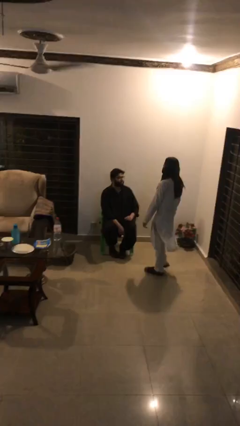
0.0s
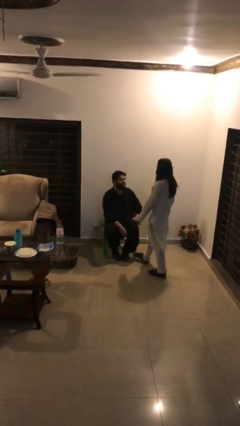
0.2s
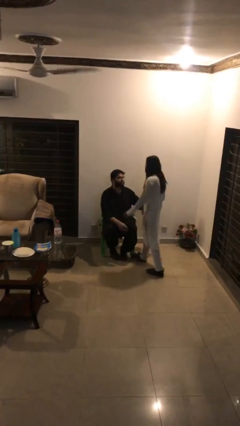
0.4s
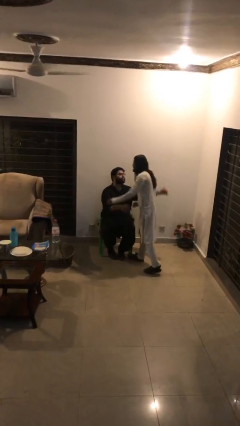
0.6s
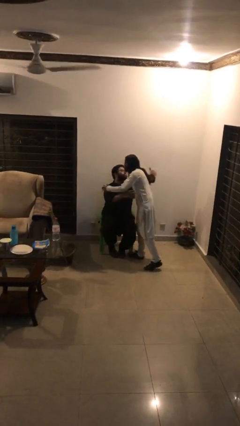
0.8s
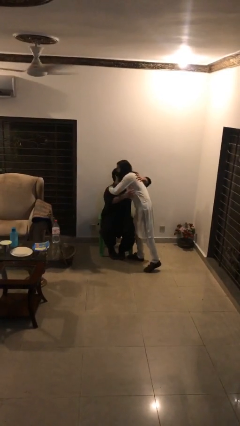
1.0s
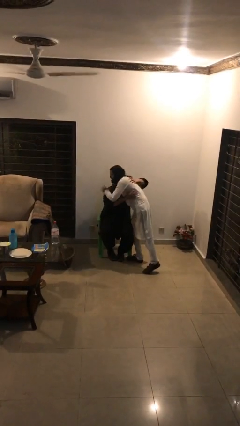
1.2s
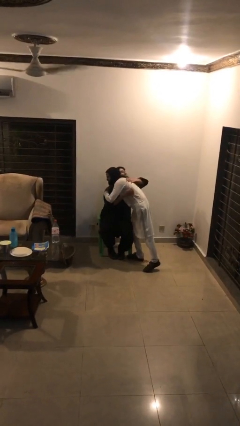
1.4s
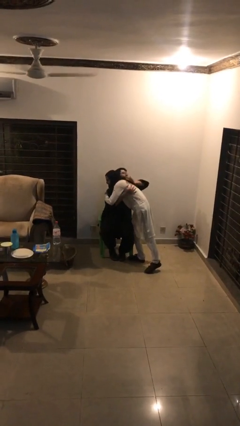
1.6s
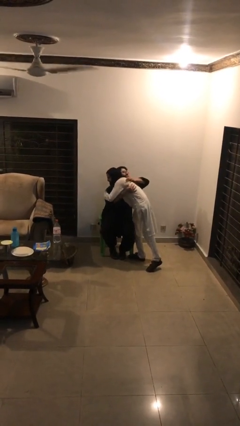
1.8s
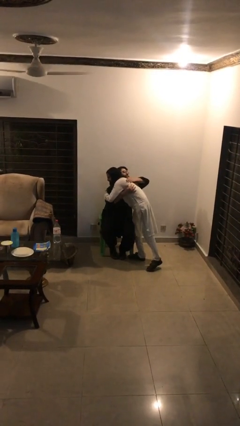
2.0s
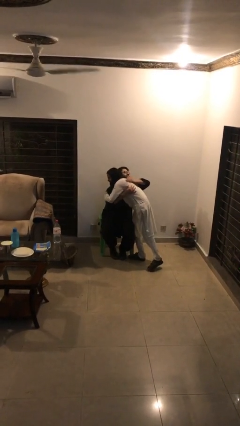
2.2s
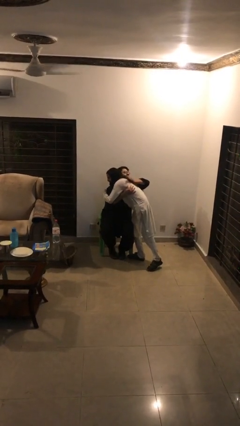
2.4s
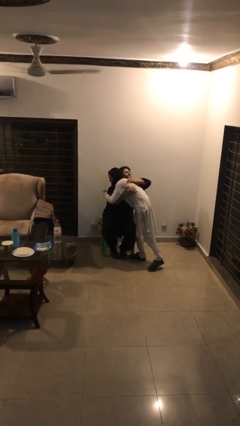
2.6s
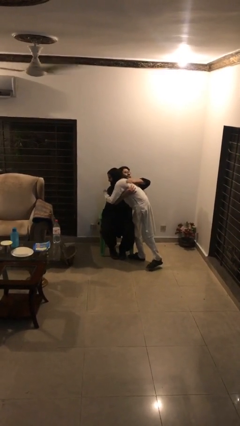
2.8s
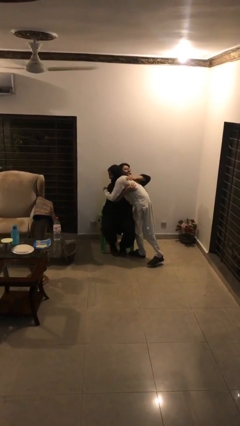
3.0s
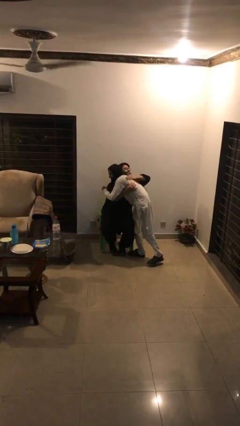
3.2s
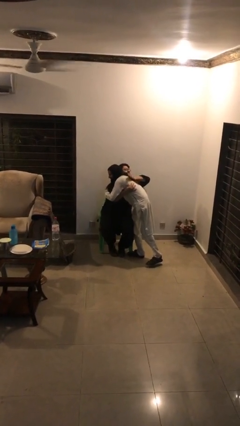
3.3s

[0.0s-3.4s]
person embraces person

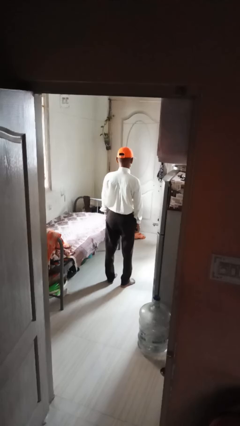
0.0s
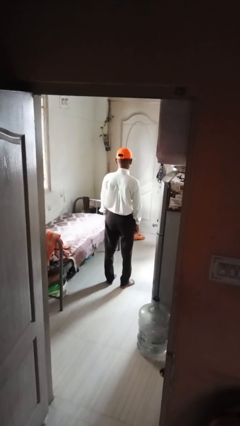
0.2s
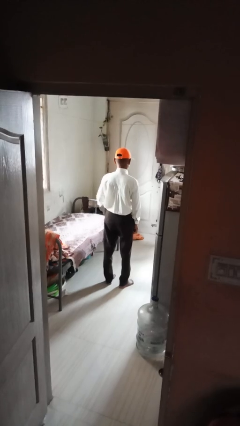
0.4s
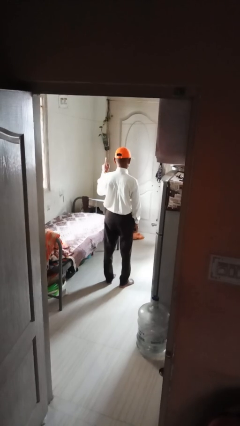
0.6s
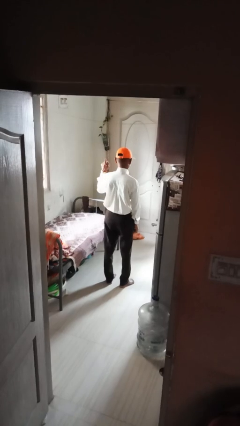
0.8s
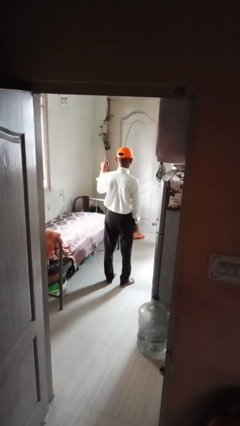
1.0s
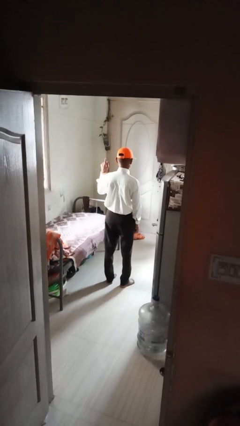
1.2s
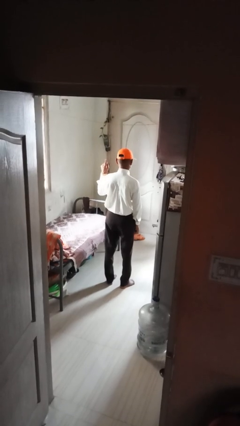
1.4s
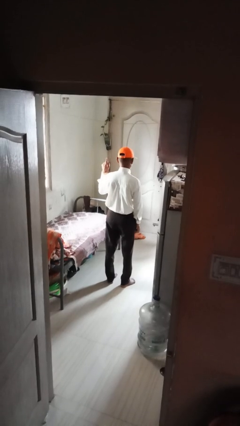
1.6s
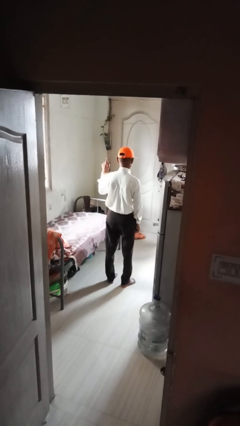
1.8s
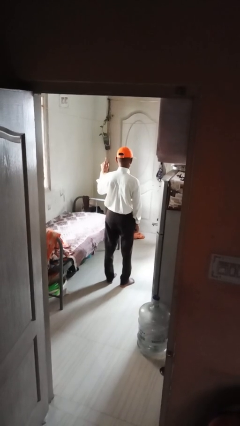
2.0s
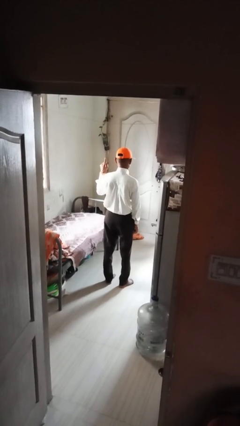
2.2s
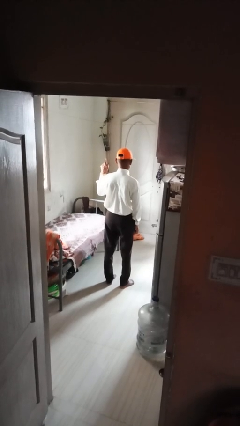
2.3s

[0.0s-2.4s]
person gestures number one

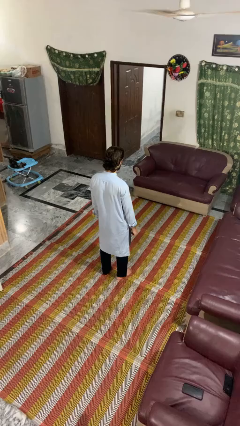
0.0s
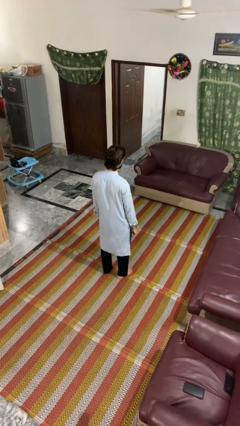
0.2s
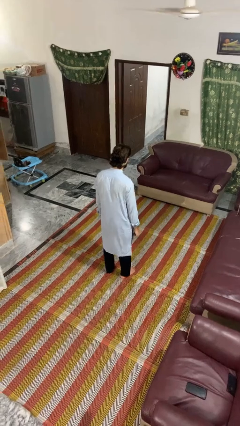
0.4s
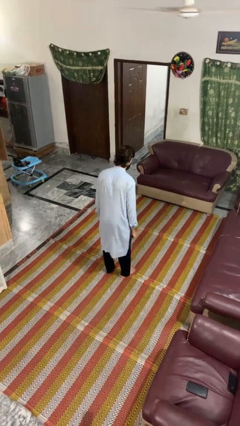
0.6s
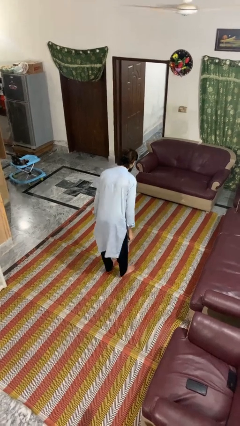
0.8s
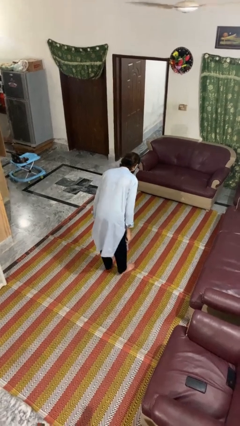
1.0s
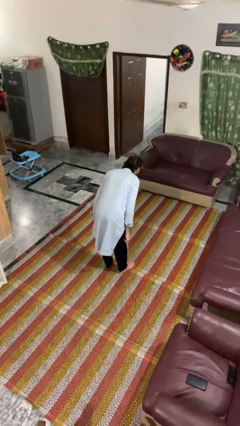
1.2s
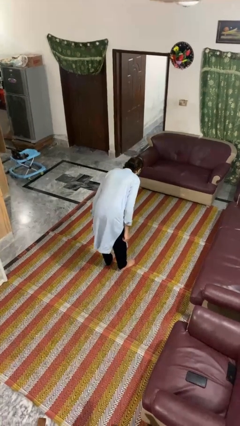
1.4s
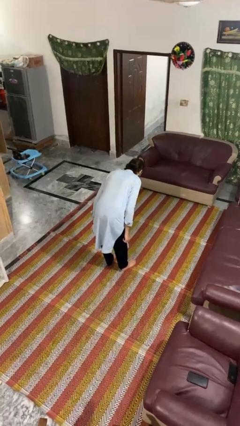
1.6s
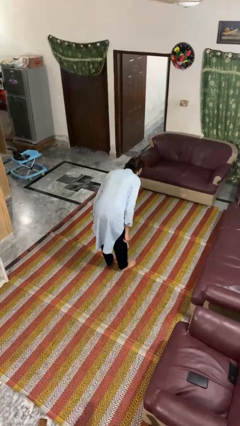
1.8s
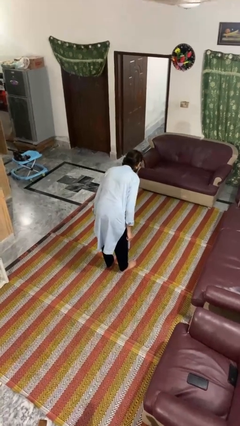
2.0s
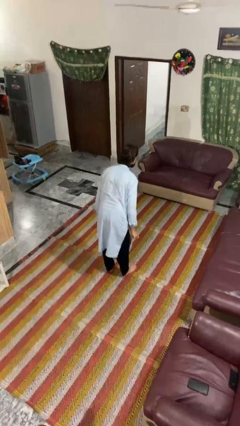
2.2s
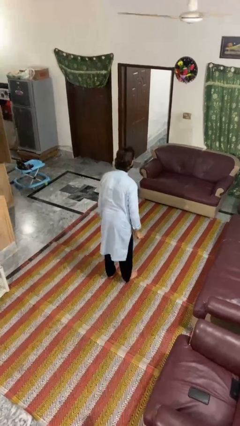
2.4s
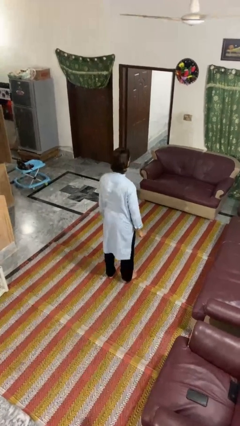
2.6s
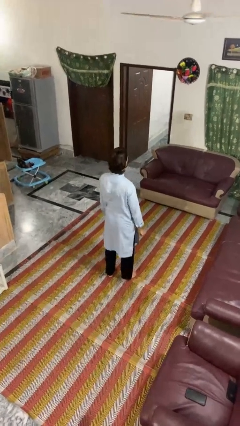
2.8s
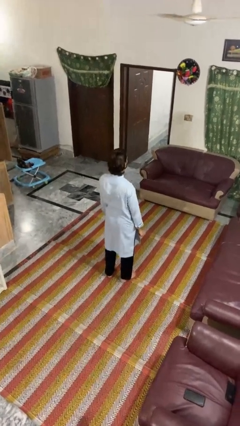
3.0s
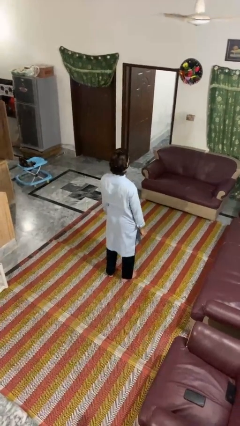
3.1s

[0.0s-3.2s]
person bows

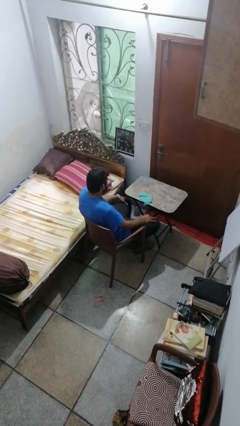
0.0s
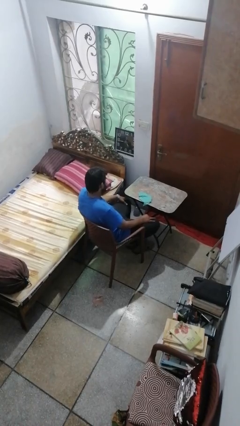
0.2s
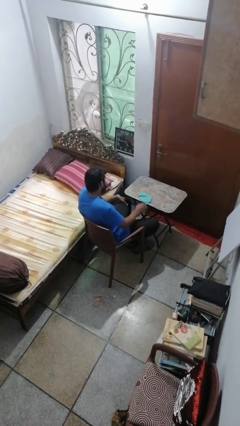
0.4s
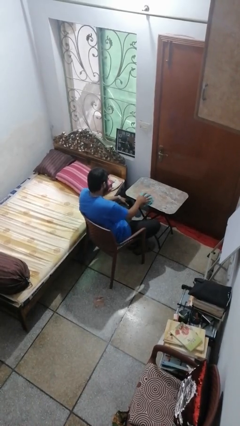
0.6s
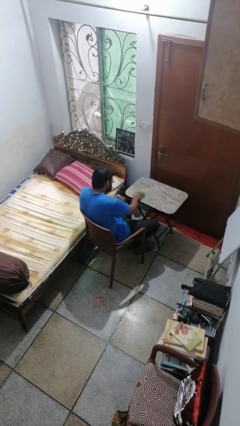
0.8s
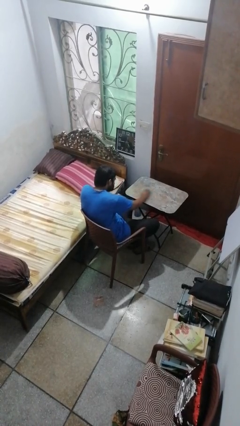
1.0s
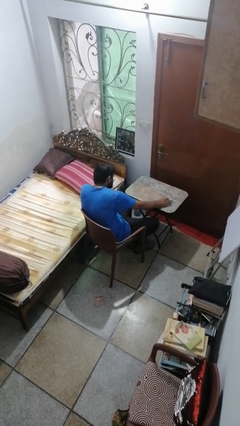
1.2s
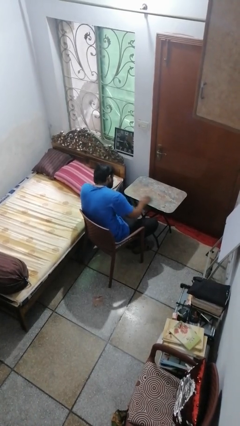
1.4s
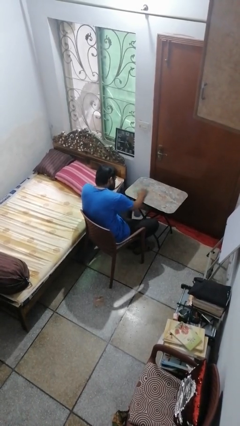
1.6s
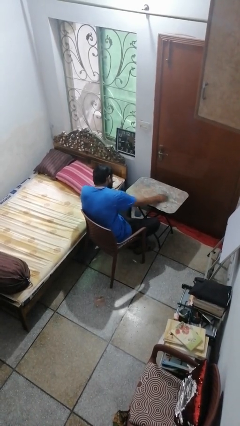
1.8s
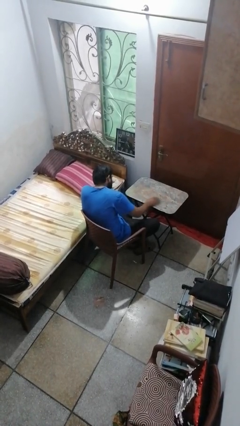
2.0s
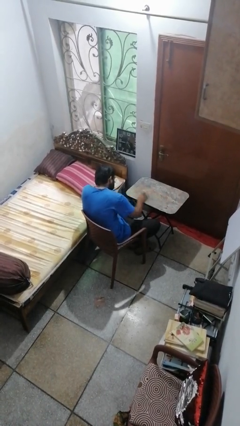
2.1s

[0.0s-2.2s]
person cleans table with rag

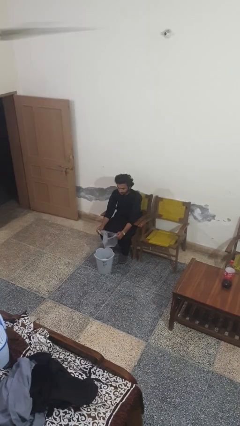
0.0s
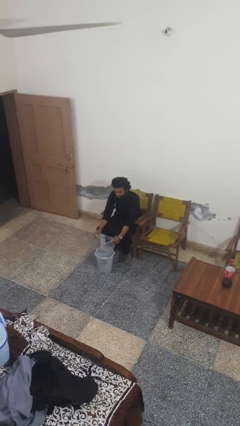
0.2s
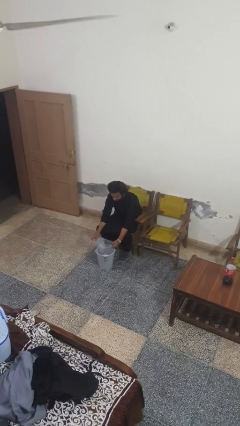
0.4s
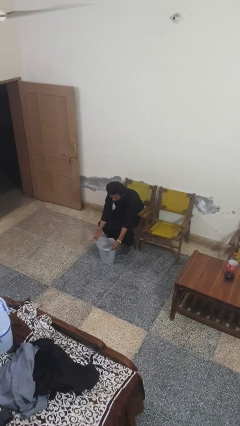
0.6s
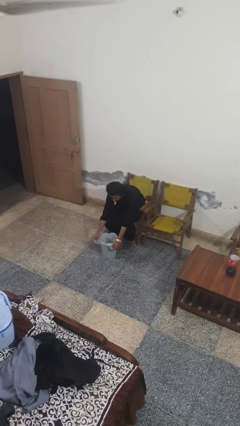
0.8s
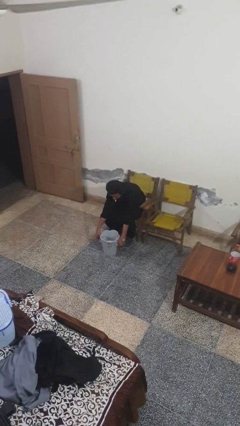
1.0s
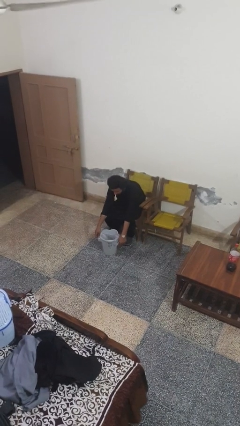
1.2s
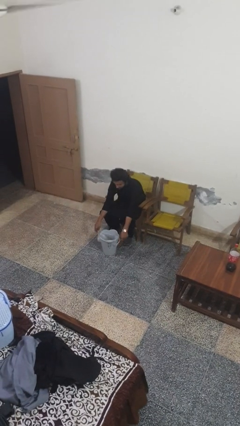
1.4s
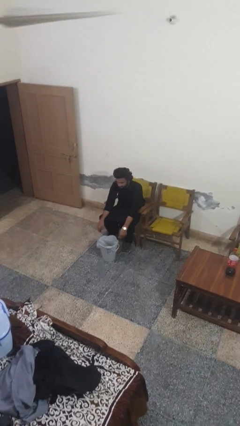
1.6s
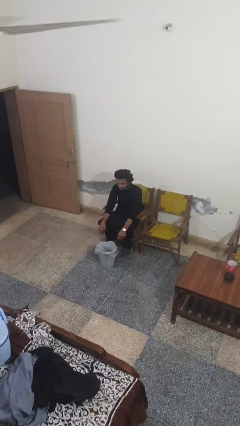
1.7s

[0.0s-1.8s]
person inserts trashbag into trashcan

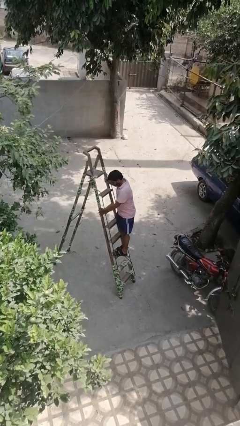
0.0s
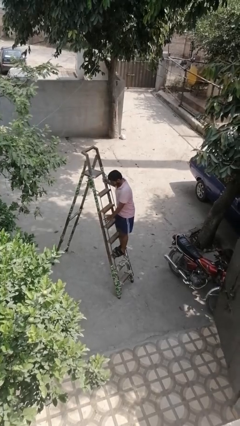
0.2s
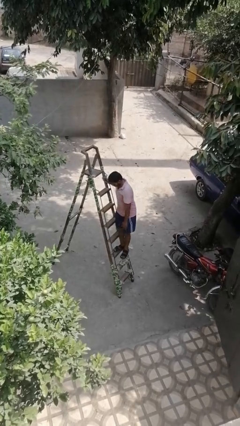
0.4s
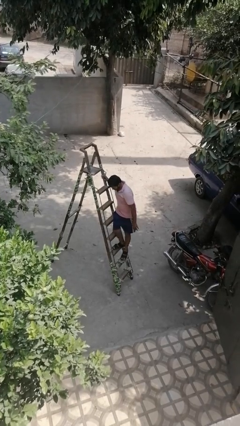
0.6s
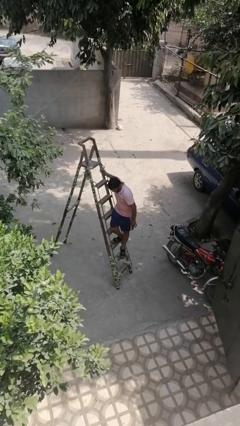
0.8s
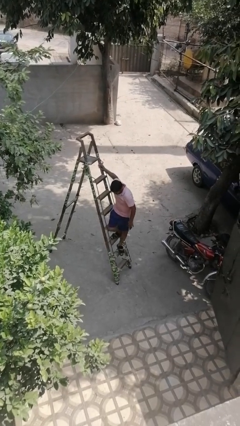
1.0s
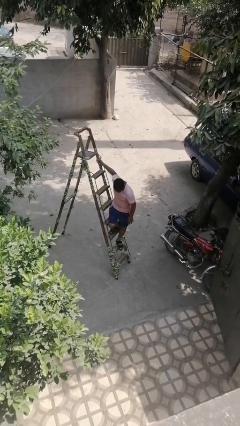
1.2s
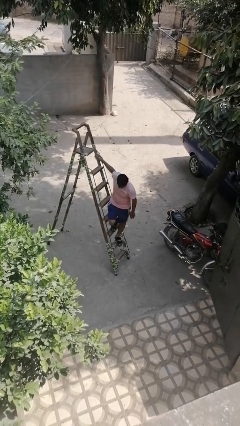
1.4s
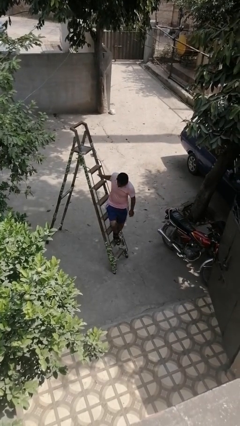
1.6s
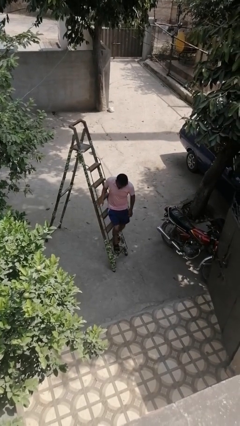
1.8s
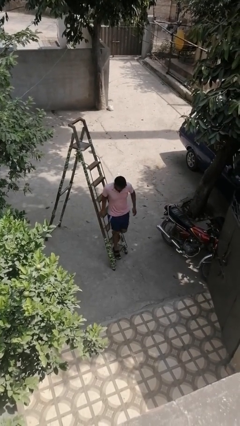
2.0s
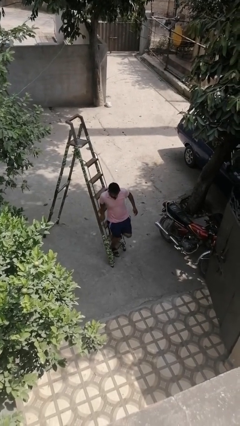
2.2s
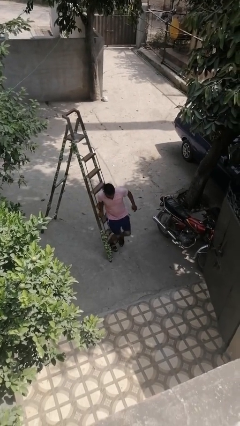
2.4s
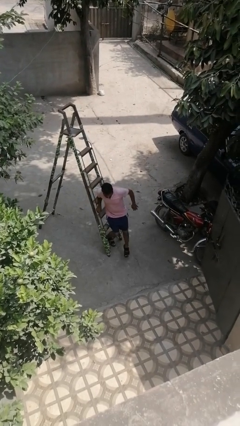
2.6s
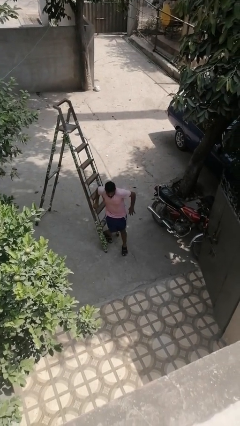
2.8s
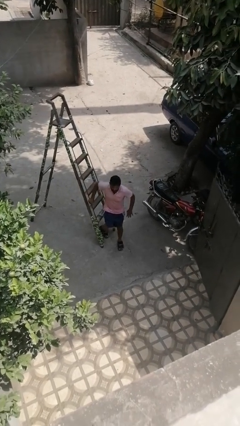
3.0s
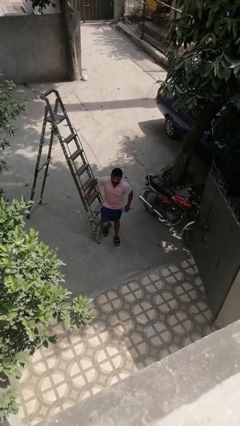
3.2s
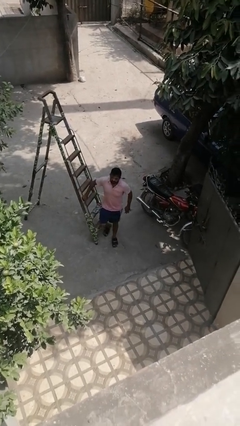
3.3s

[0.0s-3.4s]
person climbs down ladder

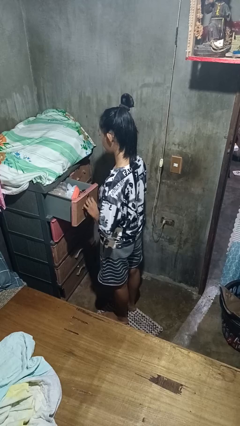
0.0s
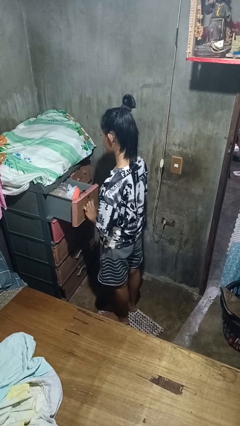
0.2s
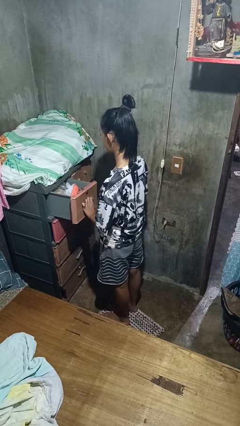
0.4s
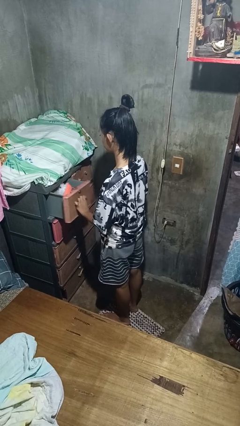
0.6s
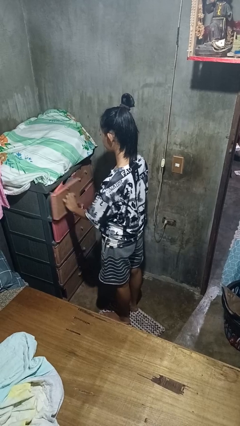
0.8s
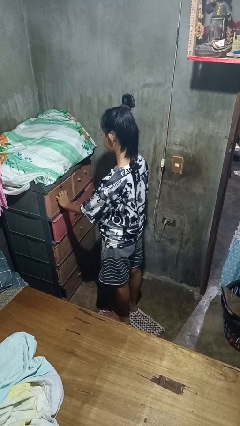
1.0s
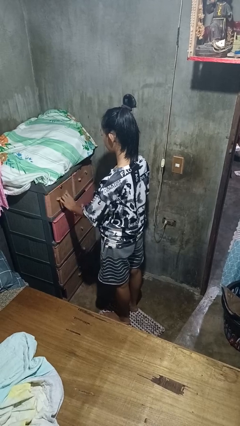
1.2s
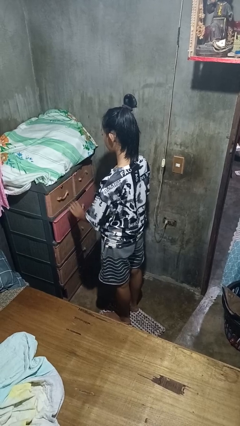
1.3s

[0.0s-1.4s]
person closes dresser drawer
